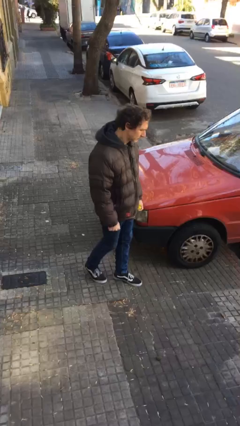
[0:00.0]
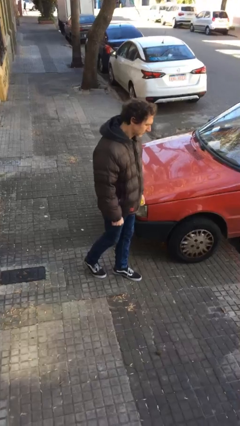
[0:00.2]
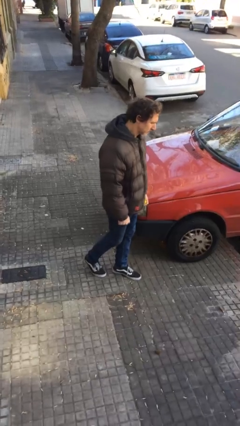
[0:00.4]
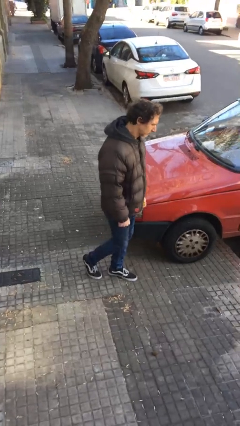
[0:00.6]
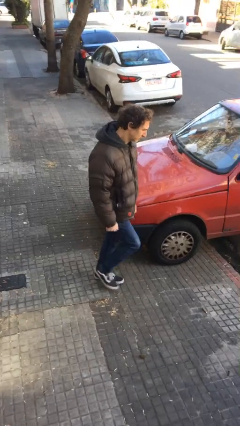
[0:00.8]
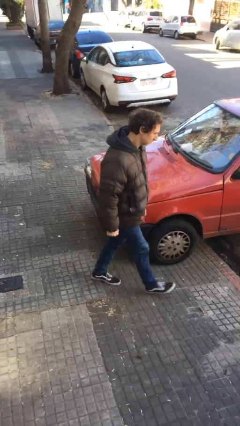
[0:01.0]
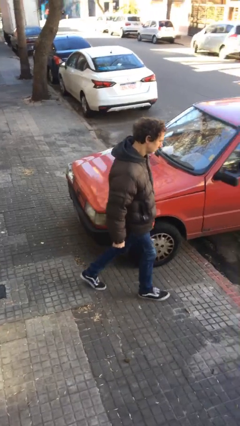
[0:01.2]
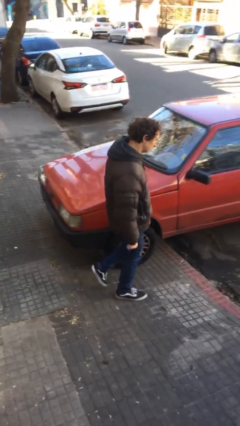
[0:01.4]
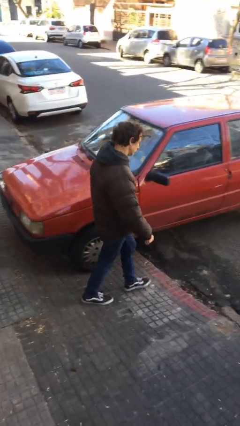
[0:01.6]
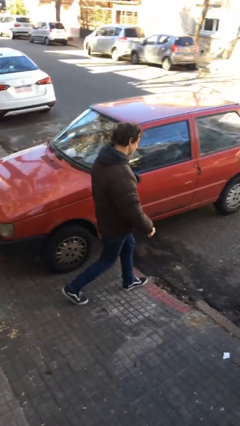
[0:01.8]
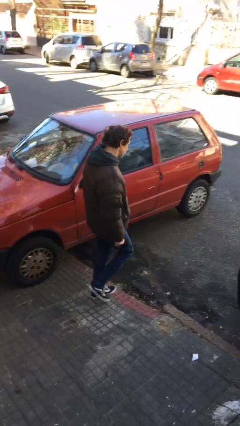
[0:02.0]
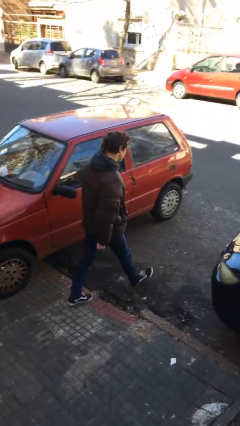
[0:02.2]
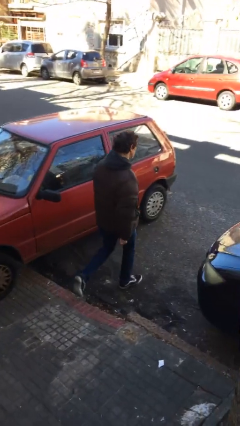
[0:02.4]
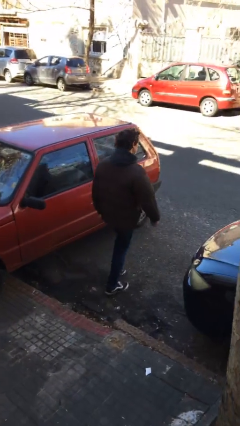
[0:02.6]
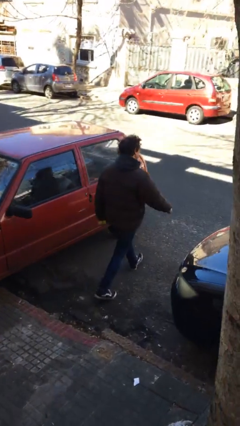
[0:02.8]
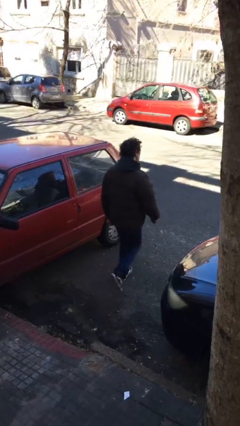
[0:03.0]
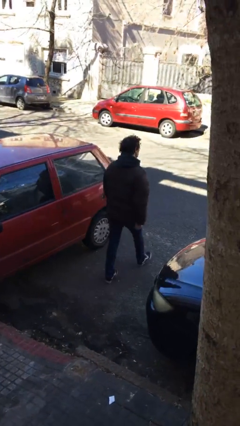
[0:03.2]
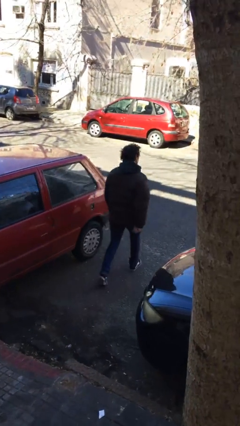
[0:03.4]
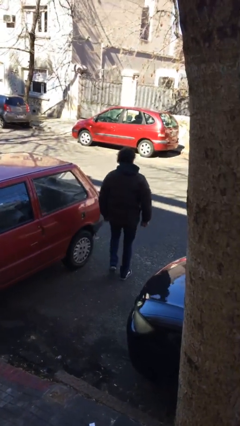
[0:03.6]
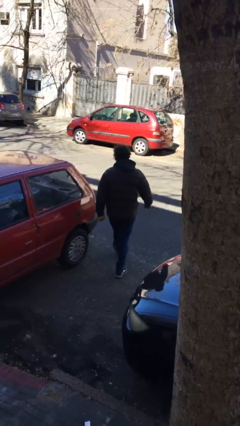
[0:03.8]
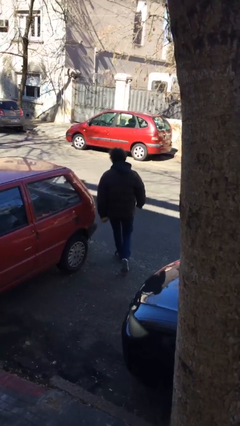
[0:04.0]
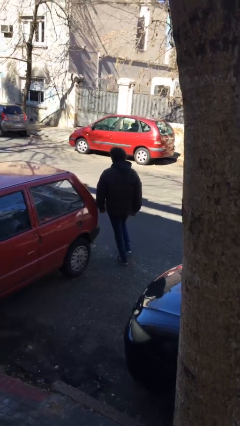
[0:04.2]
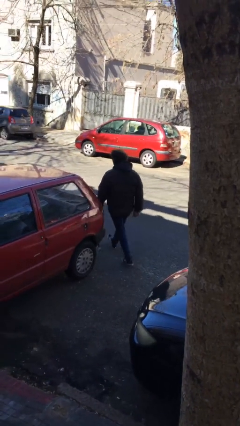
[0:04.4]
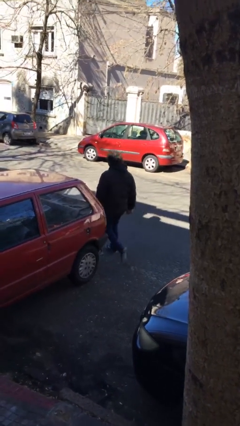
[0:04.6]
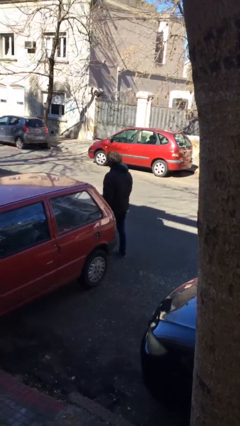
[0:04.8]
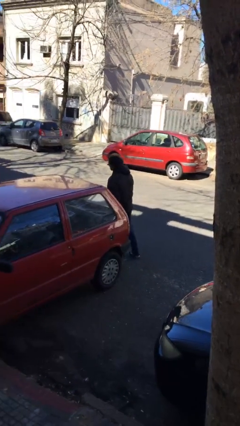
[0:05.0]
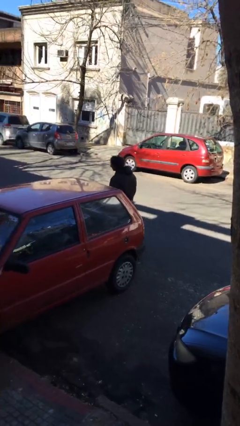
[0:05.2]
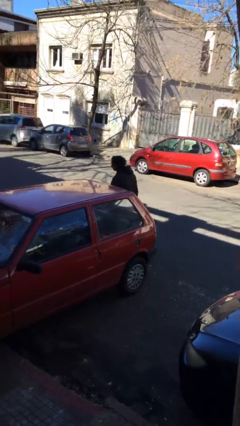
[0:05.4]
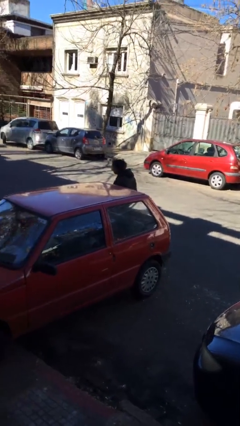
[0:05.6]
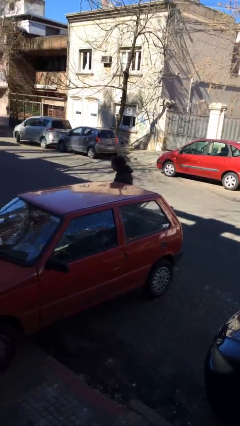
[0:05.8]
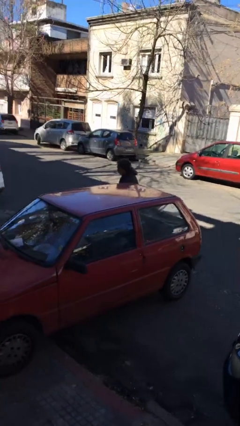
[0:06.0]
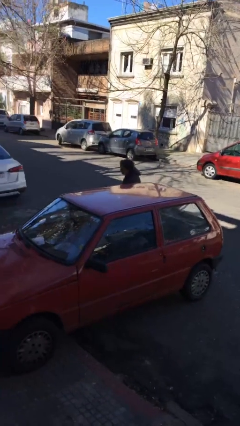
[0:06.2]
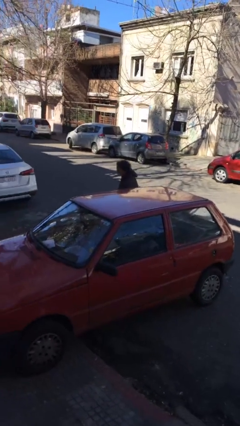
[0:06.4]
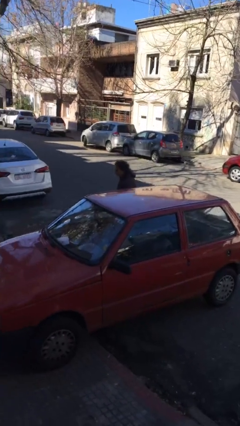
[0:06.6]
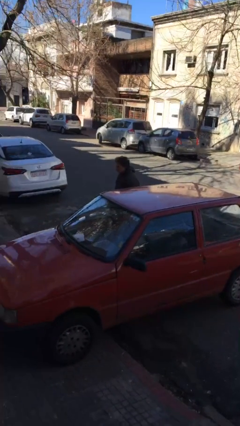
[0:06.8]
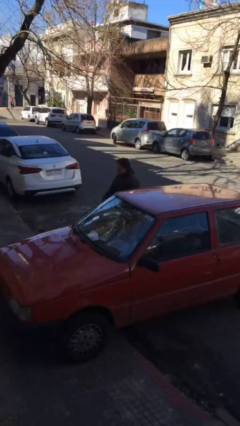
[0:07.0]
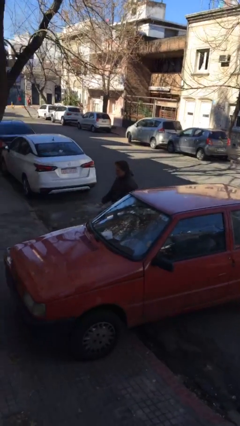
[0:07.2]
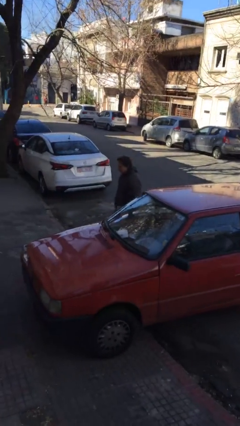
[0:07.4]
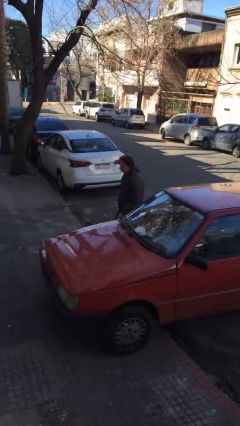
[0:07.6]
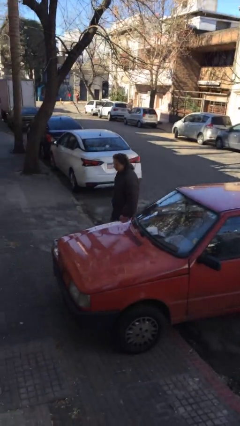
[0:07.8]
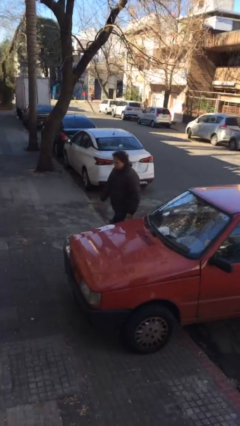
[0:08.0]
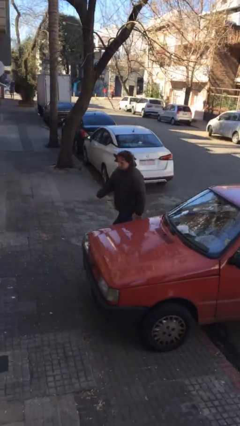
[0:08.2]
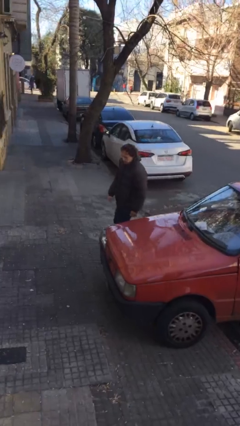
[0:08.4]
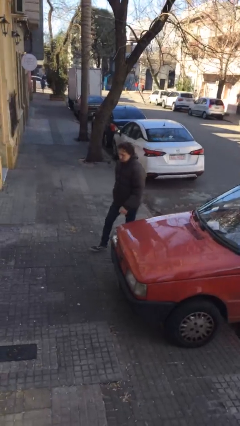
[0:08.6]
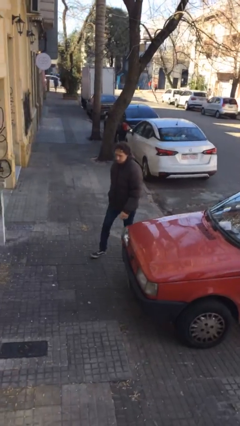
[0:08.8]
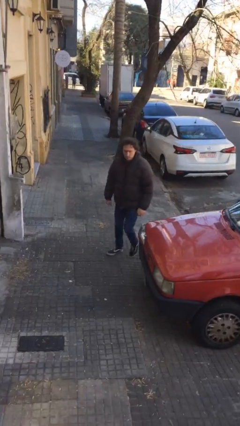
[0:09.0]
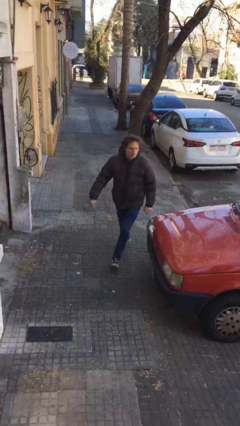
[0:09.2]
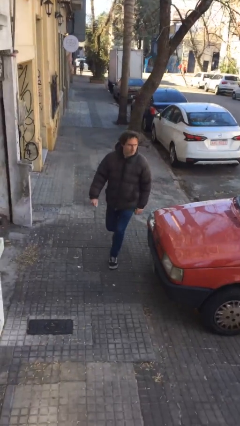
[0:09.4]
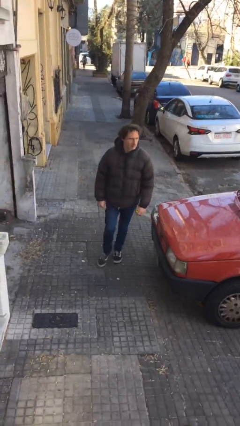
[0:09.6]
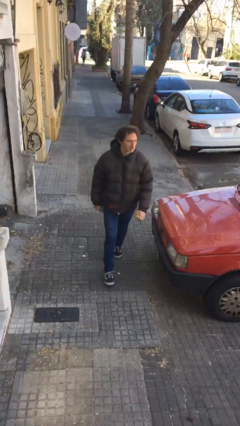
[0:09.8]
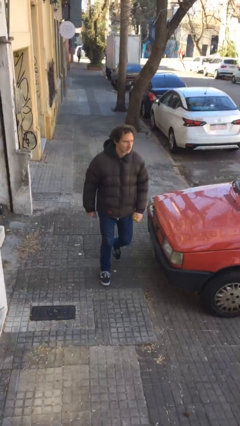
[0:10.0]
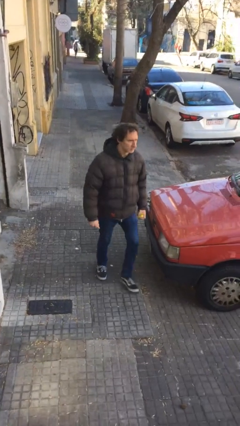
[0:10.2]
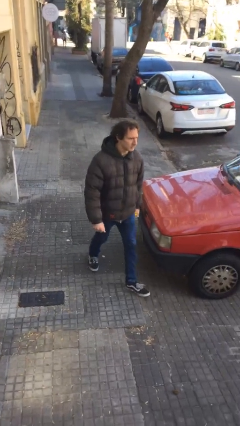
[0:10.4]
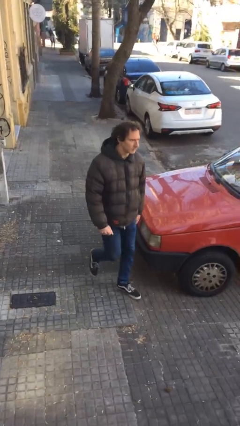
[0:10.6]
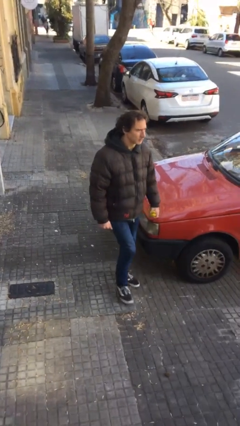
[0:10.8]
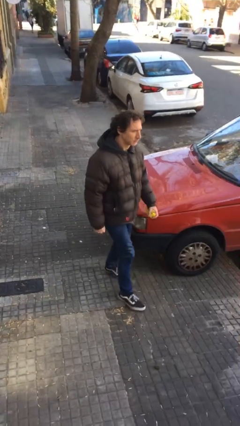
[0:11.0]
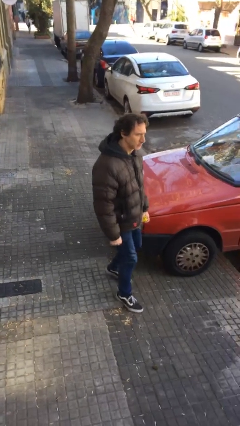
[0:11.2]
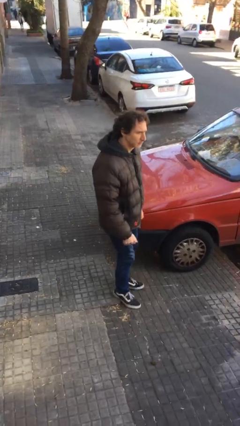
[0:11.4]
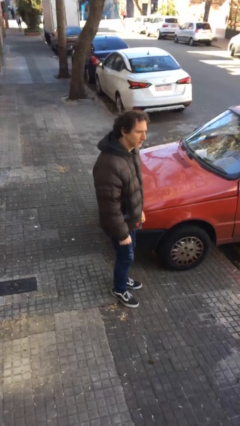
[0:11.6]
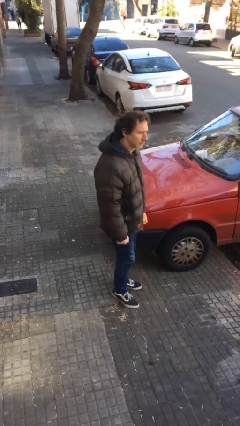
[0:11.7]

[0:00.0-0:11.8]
person walks around car

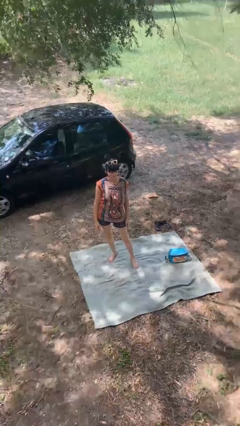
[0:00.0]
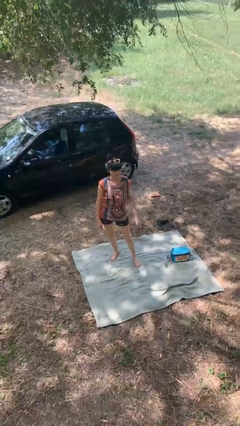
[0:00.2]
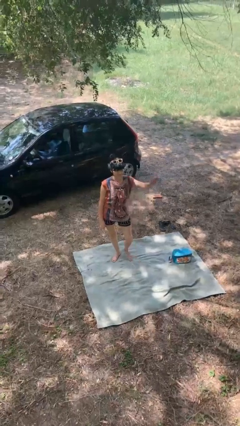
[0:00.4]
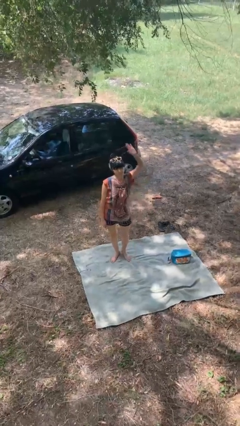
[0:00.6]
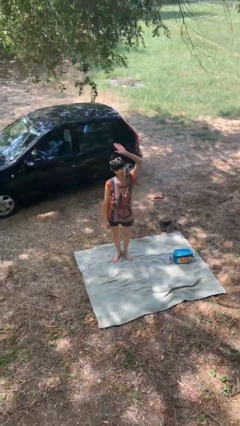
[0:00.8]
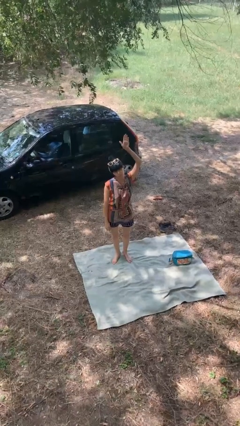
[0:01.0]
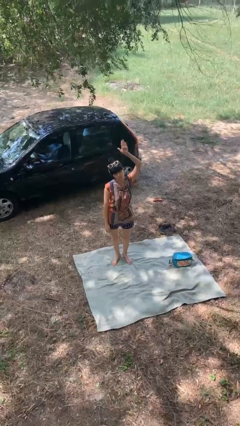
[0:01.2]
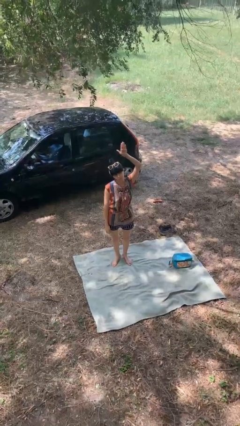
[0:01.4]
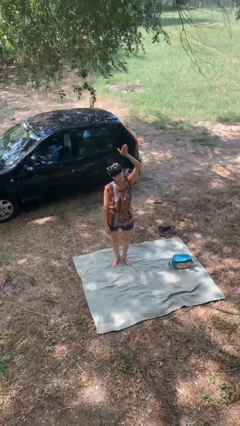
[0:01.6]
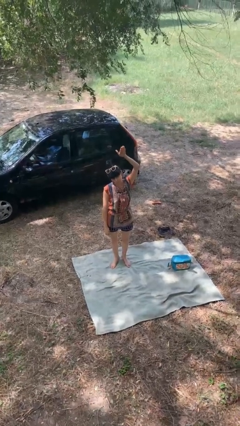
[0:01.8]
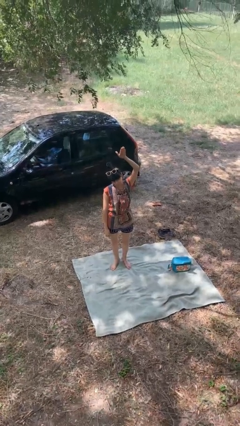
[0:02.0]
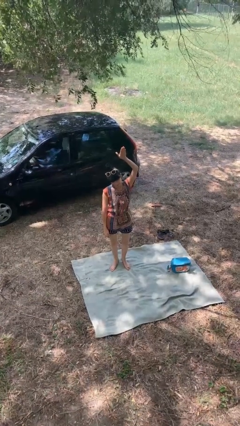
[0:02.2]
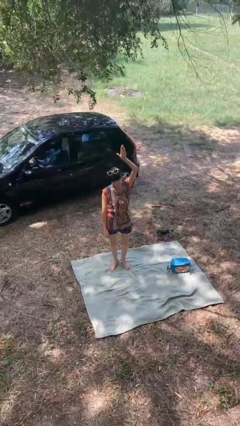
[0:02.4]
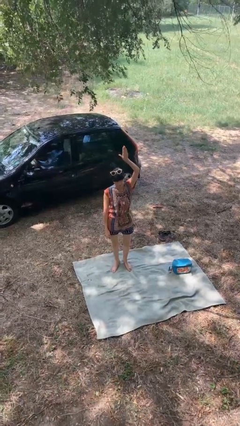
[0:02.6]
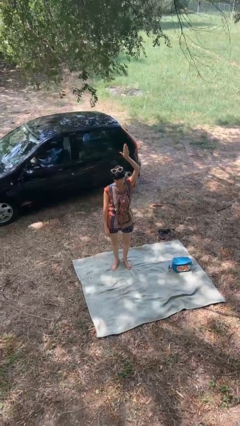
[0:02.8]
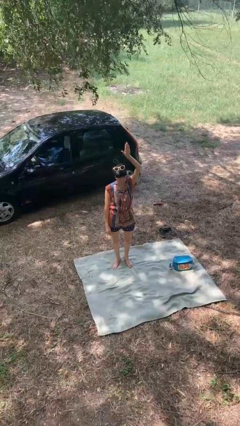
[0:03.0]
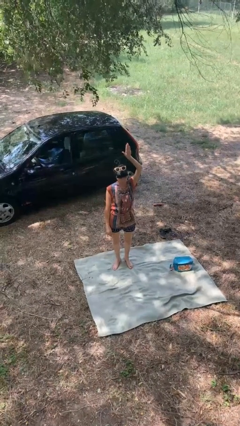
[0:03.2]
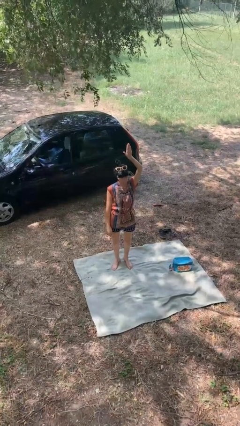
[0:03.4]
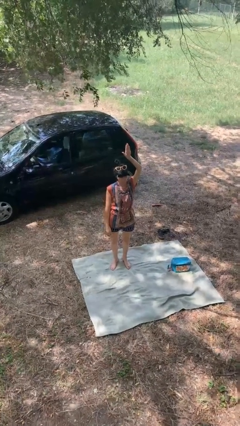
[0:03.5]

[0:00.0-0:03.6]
person gestures raise hand

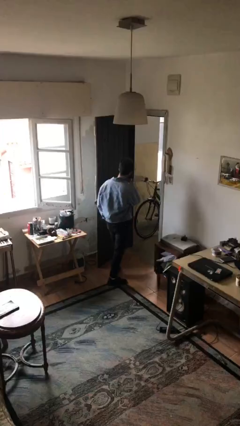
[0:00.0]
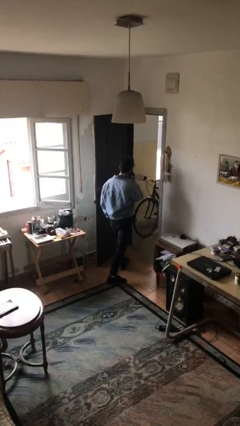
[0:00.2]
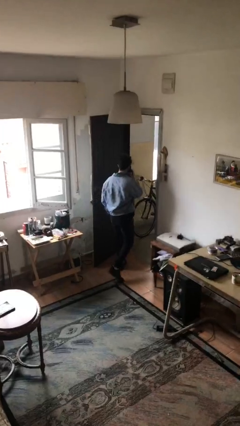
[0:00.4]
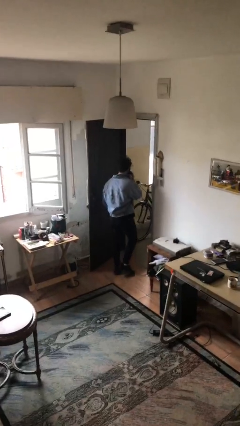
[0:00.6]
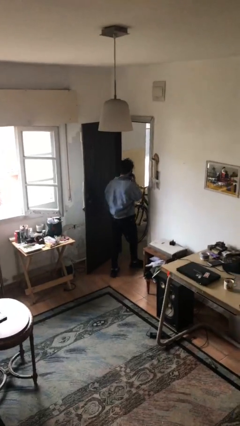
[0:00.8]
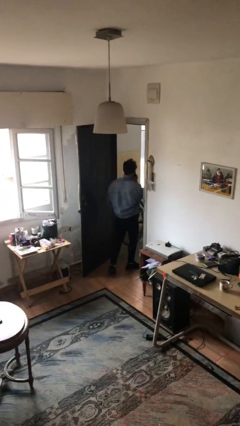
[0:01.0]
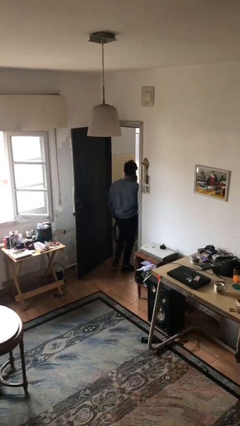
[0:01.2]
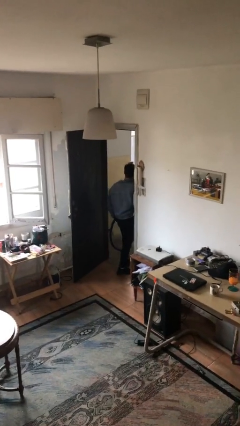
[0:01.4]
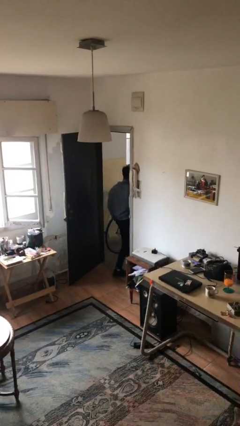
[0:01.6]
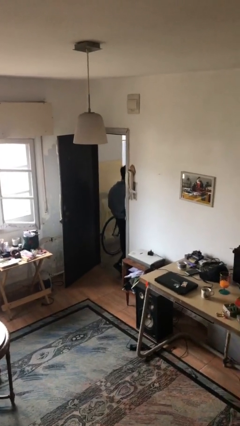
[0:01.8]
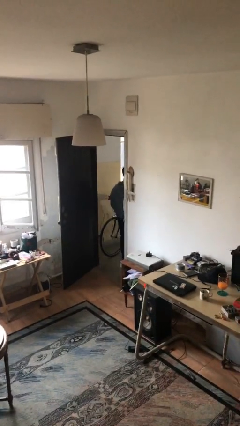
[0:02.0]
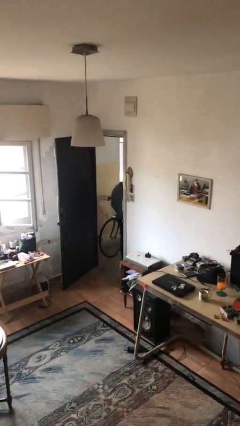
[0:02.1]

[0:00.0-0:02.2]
person exits scene through structure

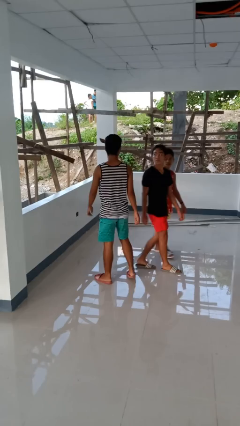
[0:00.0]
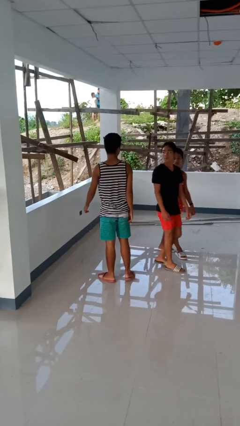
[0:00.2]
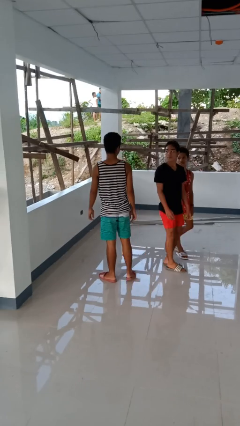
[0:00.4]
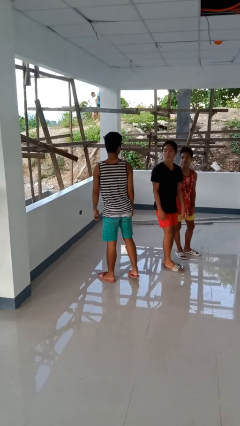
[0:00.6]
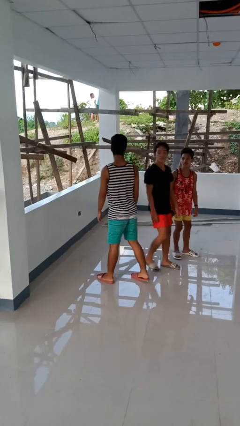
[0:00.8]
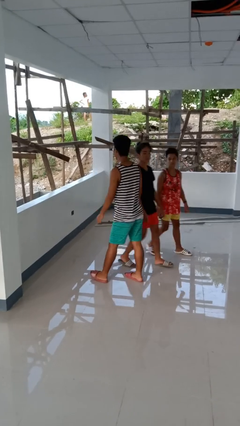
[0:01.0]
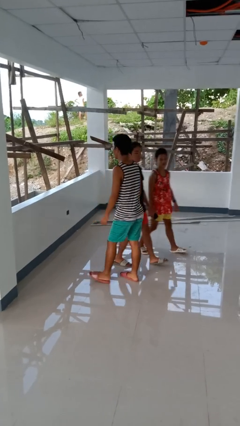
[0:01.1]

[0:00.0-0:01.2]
person bumps into person
